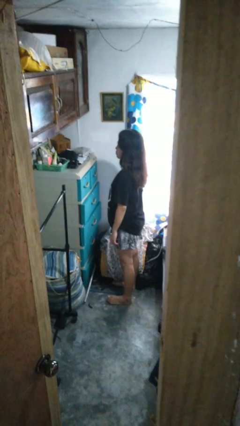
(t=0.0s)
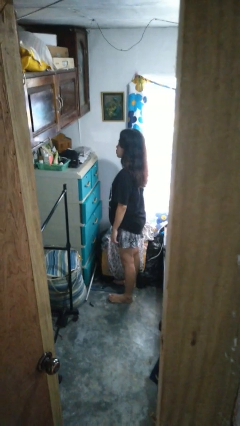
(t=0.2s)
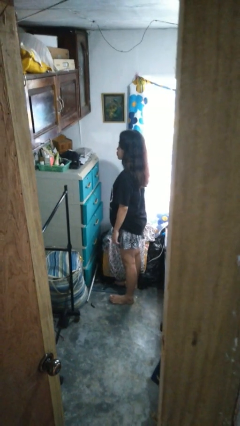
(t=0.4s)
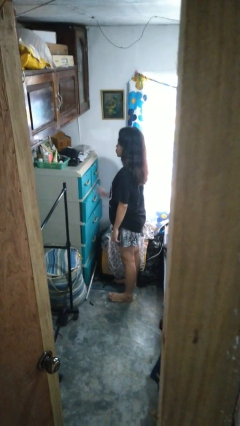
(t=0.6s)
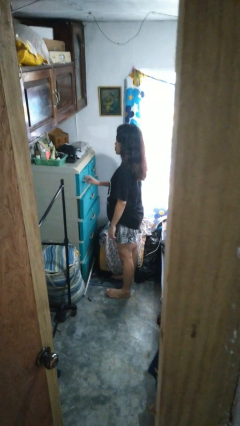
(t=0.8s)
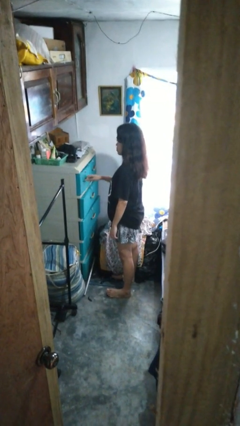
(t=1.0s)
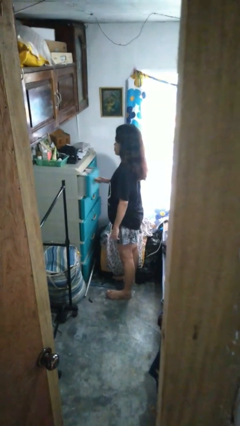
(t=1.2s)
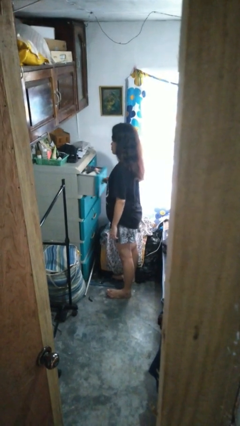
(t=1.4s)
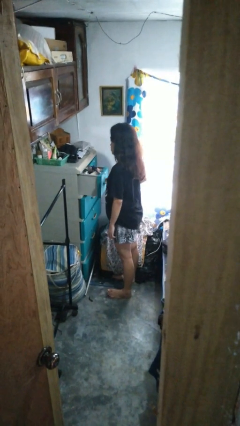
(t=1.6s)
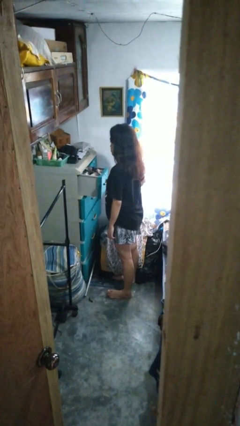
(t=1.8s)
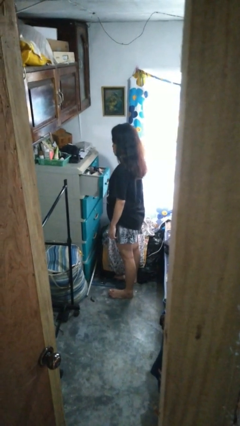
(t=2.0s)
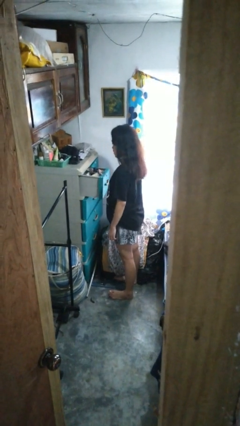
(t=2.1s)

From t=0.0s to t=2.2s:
person opens dresser drawer

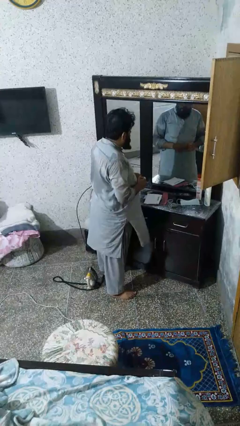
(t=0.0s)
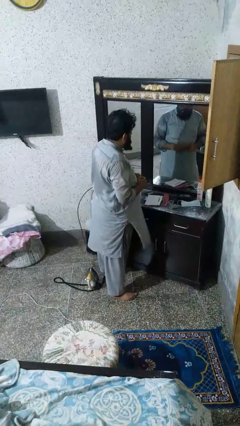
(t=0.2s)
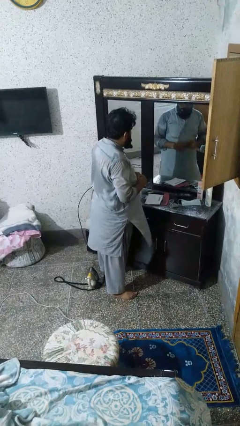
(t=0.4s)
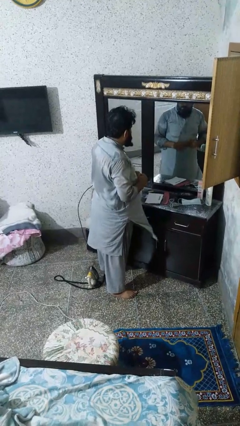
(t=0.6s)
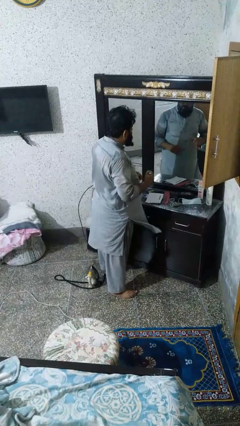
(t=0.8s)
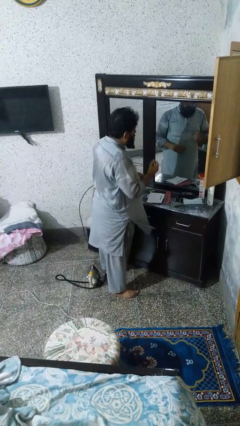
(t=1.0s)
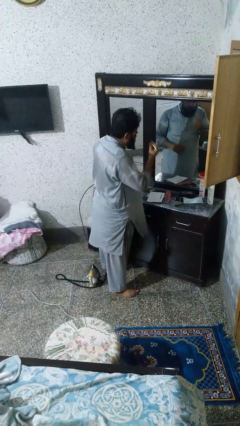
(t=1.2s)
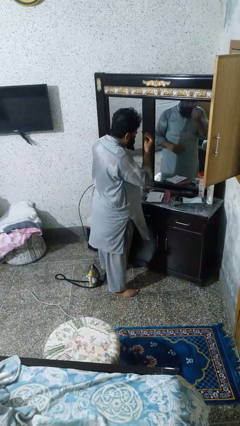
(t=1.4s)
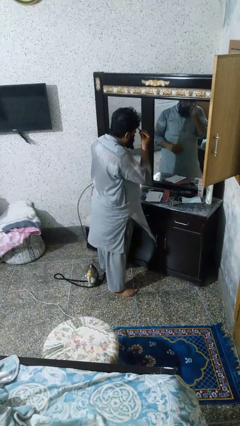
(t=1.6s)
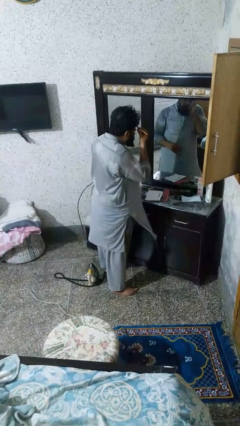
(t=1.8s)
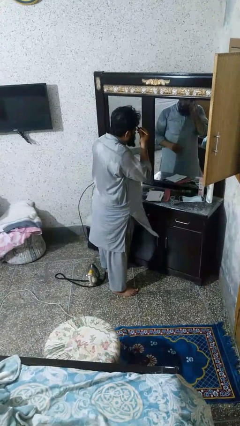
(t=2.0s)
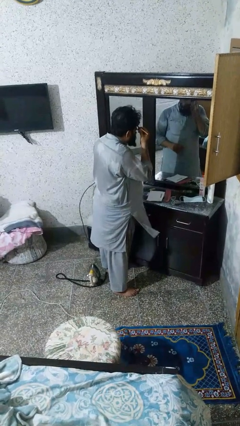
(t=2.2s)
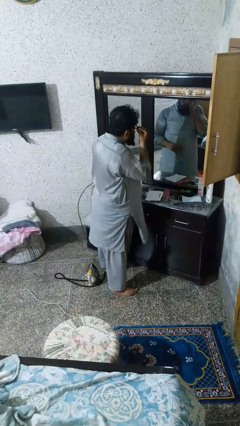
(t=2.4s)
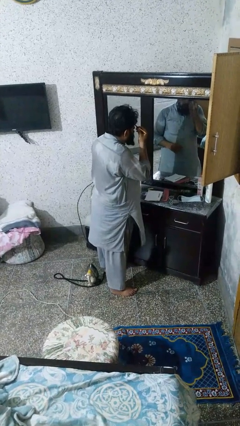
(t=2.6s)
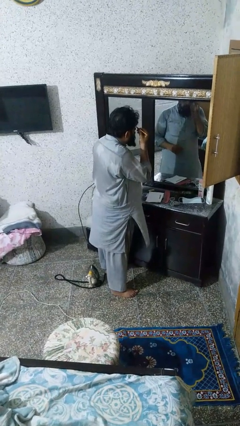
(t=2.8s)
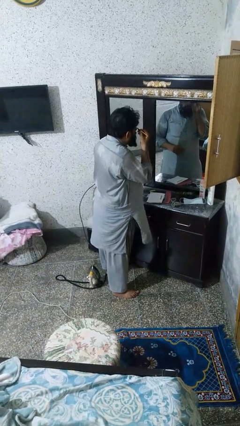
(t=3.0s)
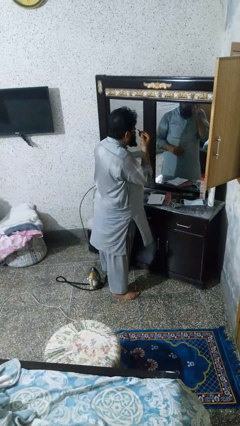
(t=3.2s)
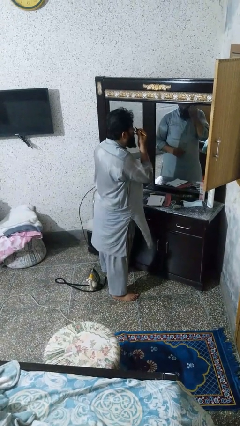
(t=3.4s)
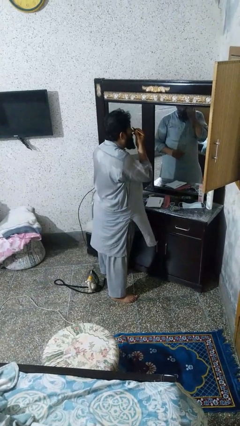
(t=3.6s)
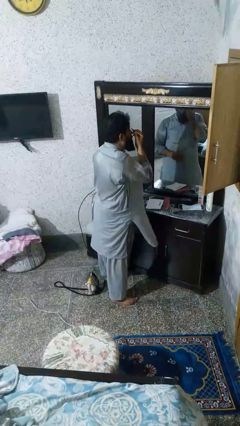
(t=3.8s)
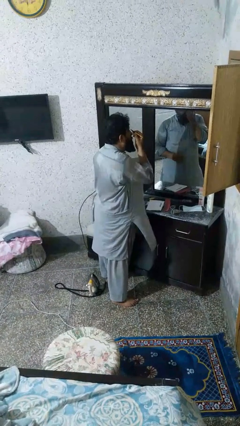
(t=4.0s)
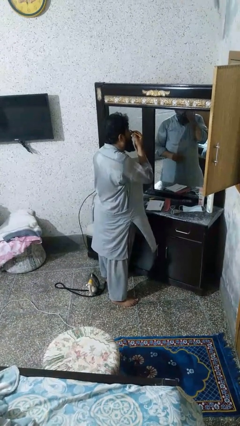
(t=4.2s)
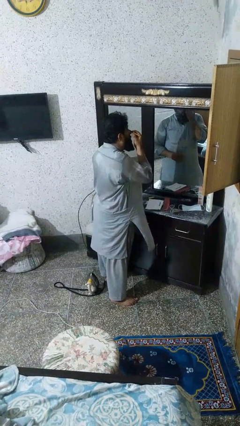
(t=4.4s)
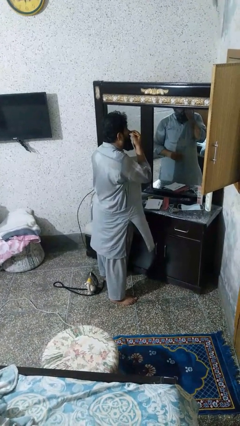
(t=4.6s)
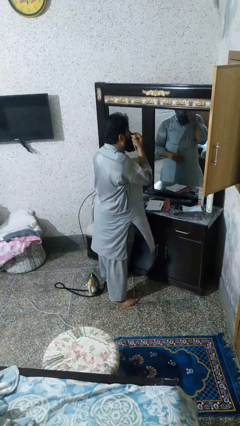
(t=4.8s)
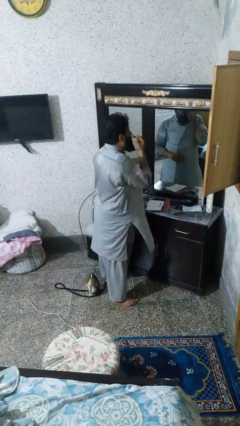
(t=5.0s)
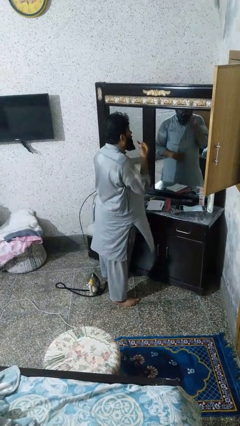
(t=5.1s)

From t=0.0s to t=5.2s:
person applies eye makeup

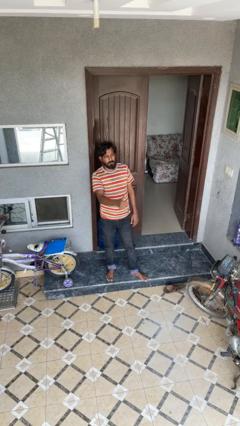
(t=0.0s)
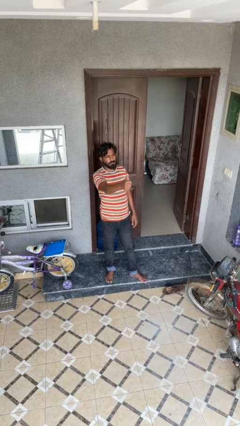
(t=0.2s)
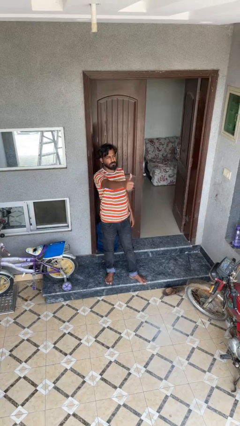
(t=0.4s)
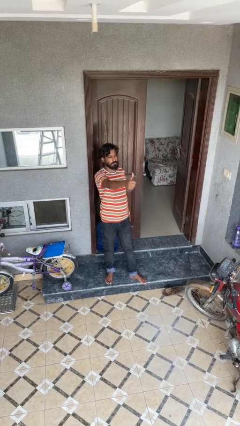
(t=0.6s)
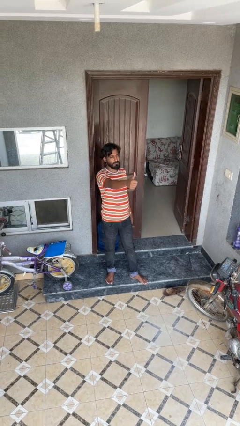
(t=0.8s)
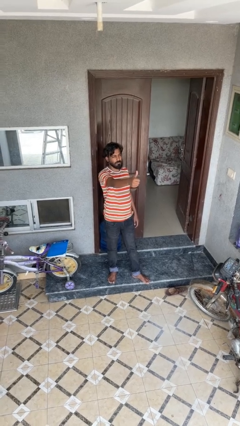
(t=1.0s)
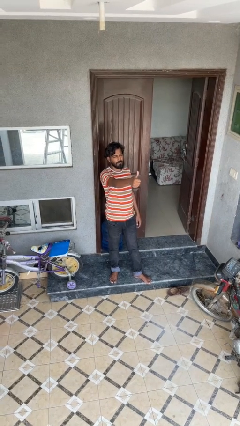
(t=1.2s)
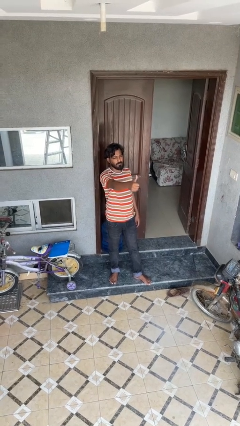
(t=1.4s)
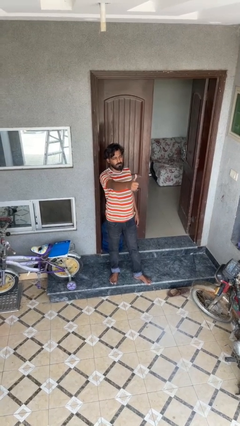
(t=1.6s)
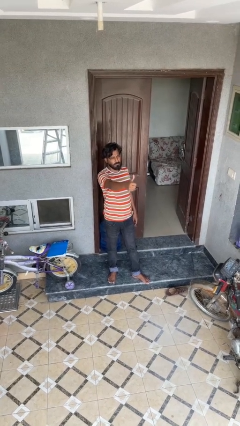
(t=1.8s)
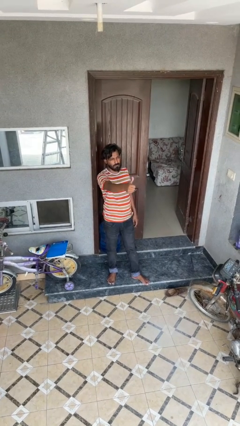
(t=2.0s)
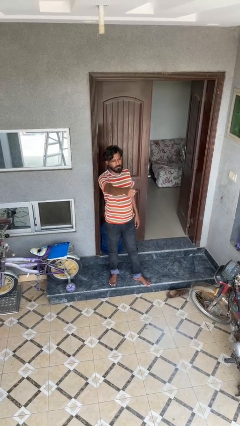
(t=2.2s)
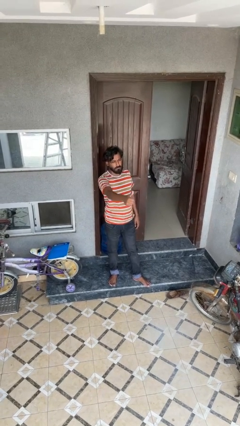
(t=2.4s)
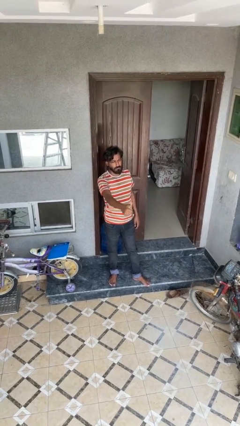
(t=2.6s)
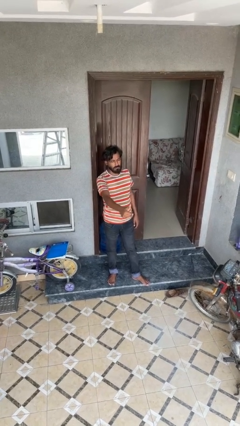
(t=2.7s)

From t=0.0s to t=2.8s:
person gestures thumbs up

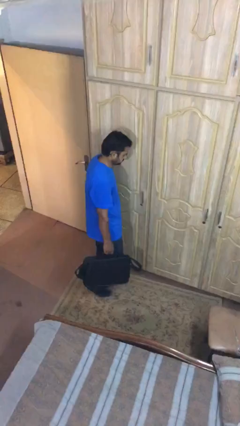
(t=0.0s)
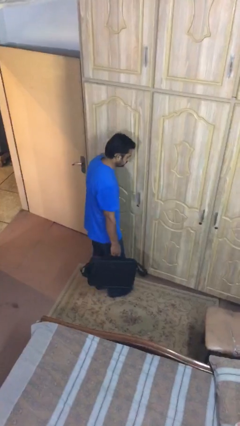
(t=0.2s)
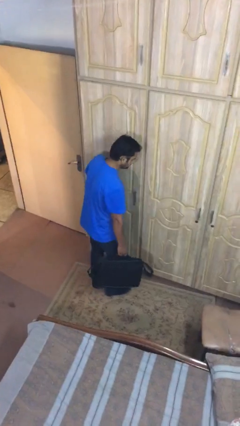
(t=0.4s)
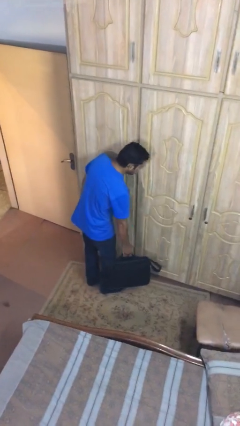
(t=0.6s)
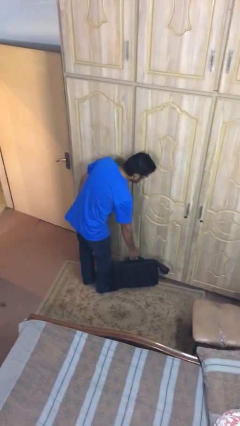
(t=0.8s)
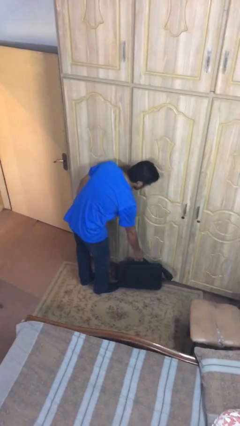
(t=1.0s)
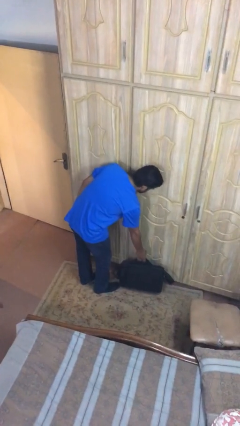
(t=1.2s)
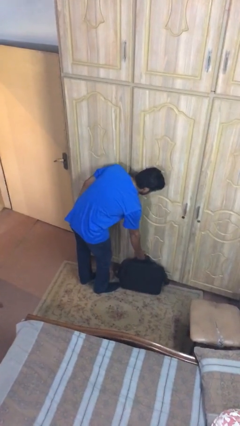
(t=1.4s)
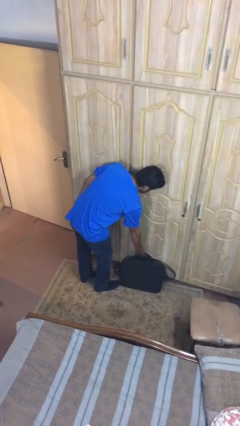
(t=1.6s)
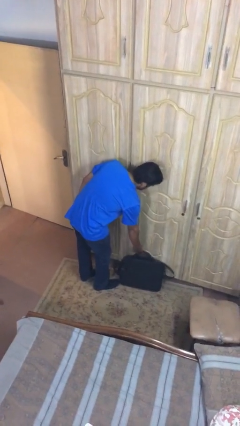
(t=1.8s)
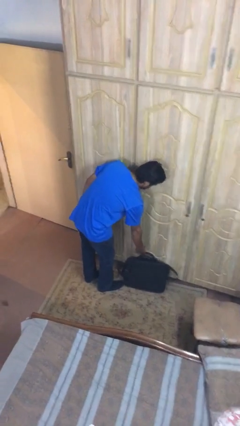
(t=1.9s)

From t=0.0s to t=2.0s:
person puts down object on floor

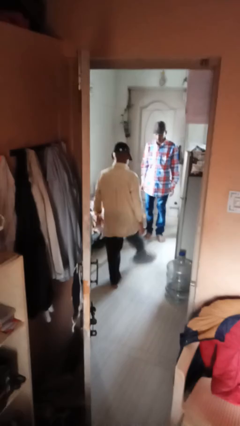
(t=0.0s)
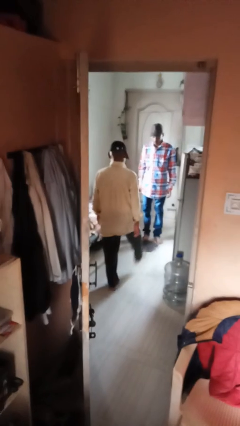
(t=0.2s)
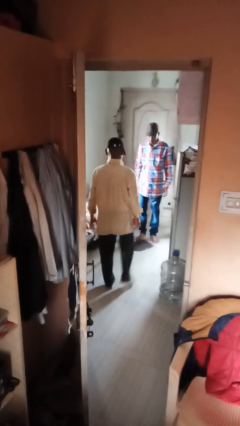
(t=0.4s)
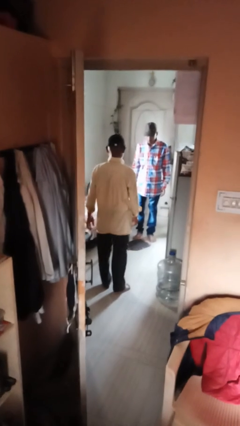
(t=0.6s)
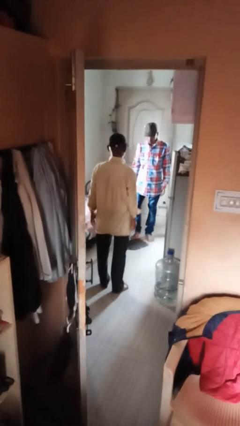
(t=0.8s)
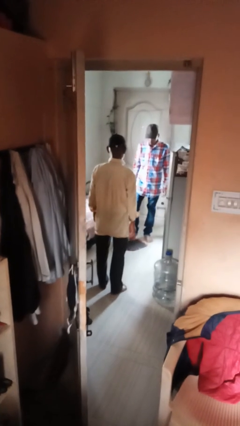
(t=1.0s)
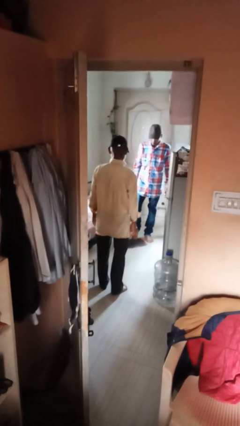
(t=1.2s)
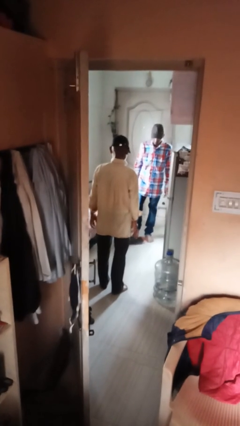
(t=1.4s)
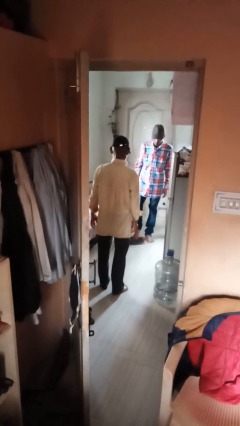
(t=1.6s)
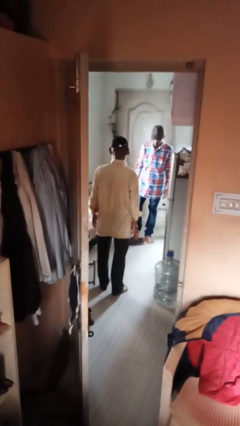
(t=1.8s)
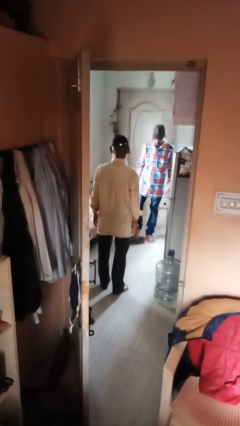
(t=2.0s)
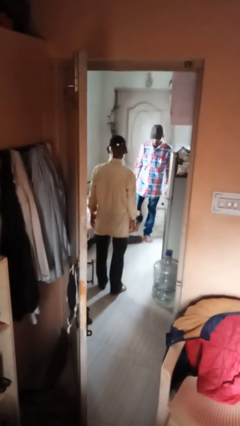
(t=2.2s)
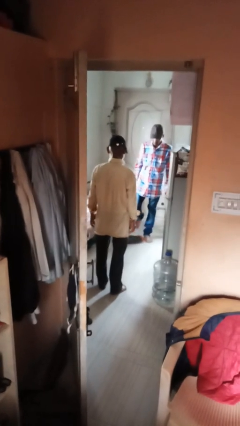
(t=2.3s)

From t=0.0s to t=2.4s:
person kicks object to person

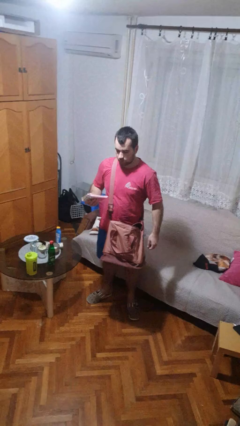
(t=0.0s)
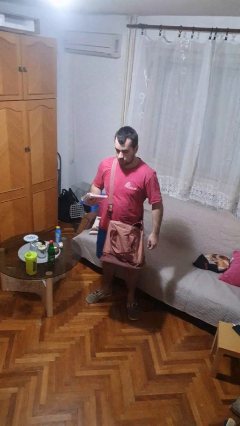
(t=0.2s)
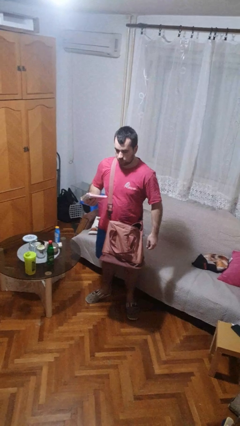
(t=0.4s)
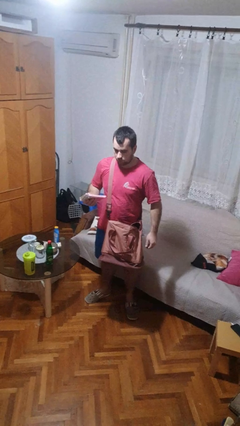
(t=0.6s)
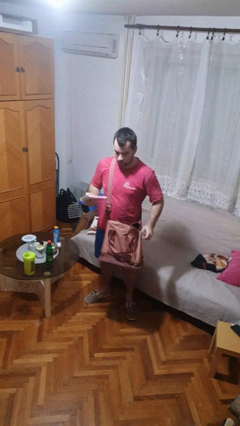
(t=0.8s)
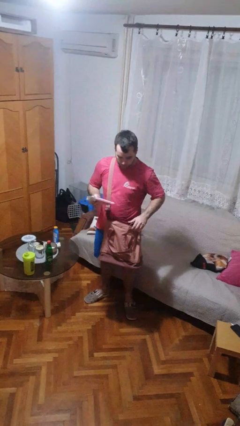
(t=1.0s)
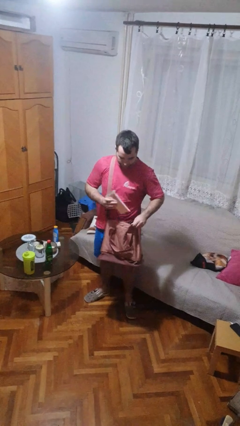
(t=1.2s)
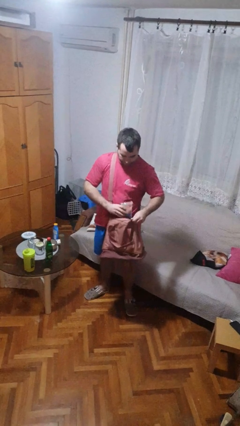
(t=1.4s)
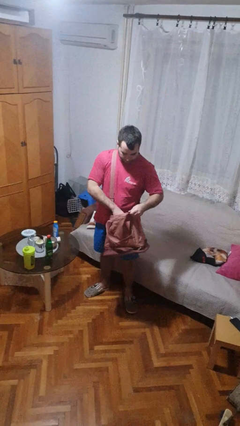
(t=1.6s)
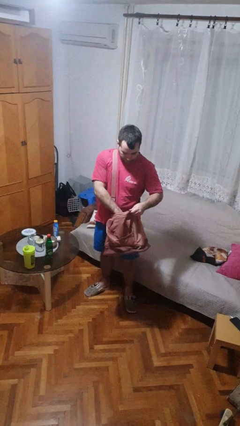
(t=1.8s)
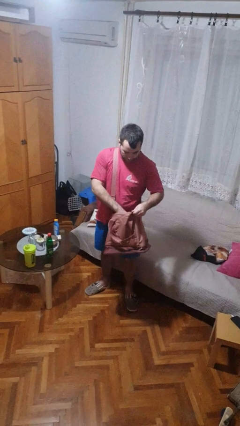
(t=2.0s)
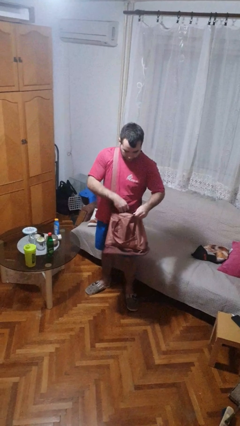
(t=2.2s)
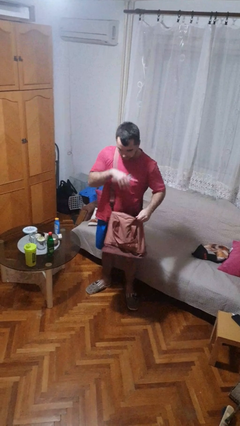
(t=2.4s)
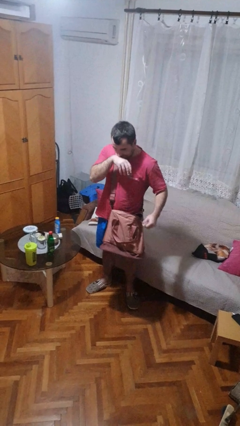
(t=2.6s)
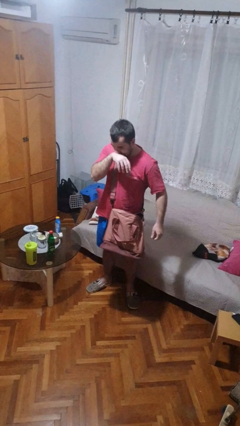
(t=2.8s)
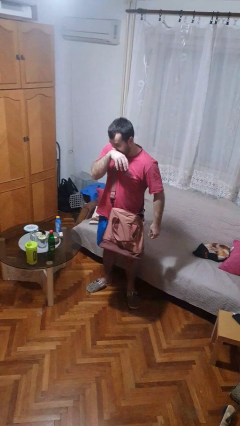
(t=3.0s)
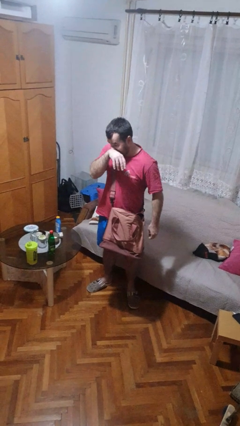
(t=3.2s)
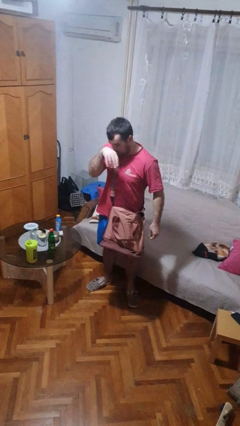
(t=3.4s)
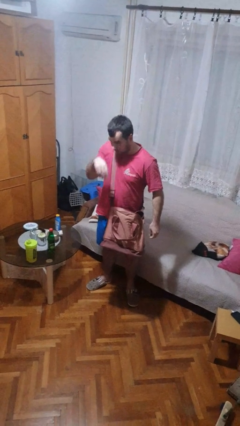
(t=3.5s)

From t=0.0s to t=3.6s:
person puts object into purse
